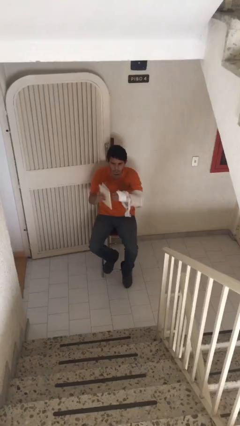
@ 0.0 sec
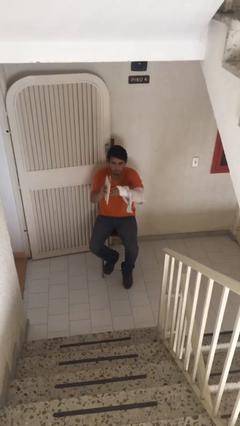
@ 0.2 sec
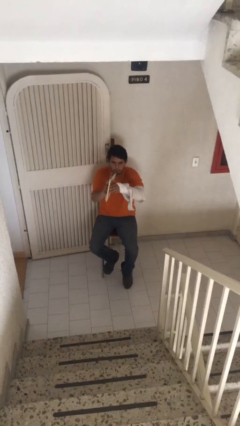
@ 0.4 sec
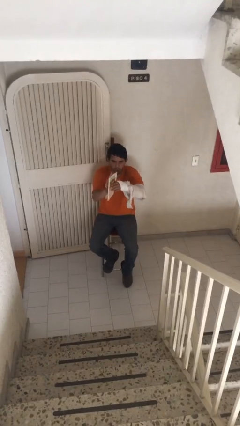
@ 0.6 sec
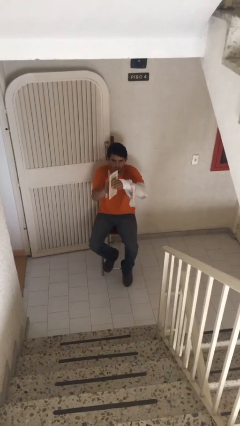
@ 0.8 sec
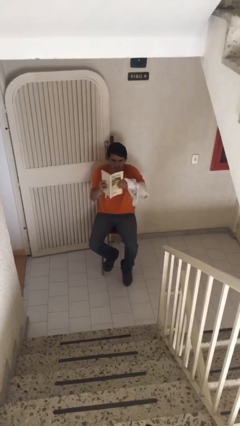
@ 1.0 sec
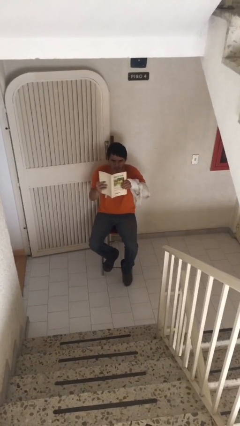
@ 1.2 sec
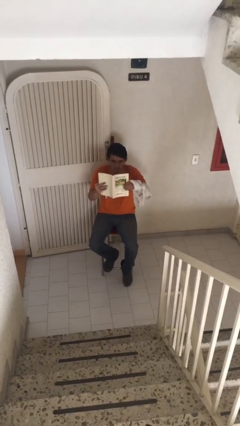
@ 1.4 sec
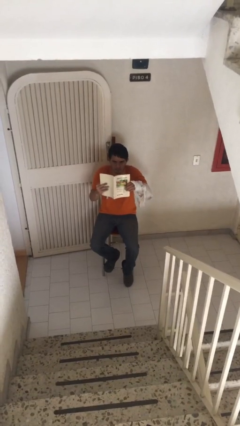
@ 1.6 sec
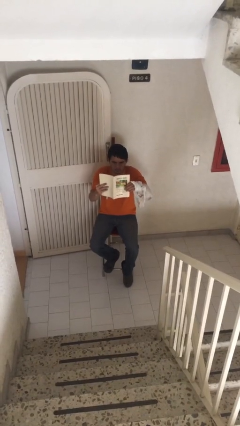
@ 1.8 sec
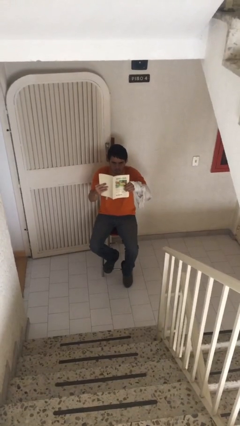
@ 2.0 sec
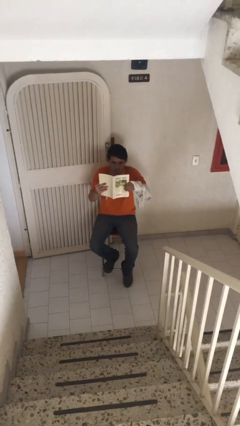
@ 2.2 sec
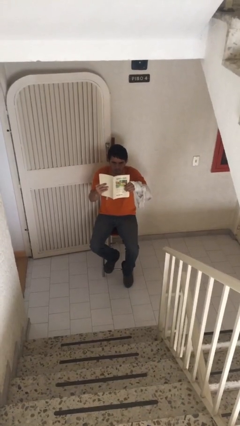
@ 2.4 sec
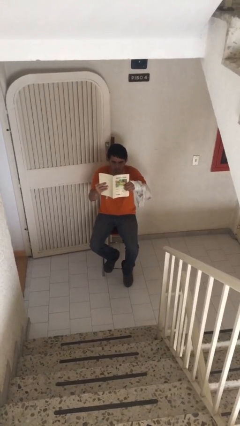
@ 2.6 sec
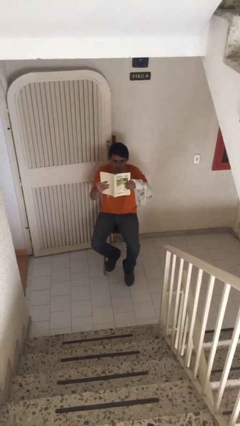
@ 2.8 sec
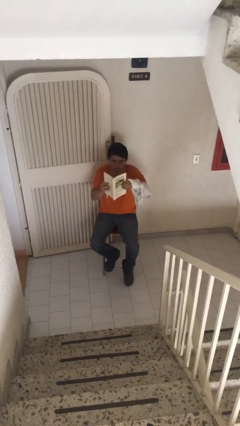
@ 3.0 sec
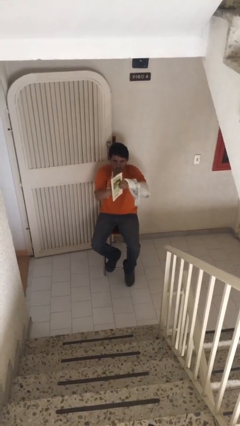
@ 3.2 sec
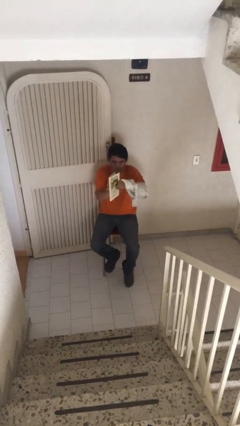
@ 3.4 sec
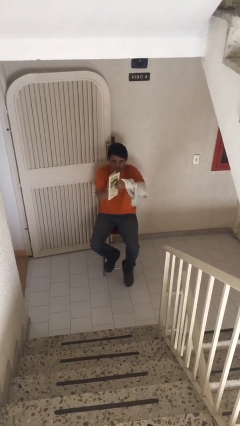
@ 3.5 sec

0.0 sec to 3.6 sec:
person reads document

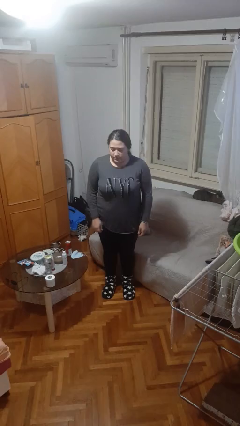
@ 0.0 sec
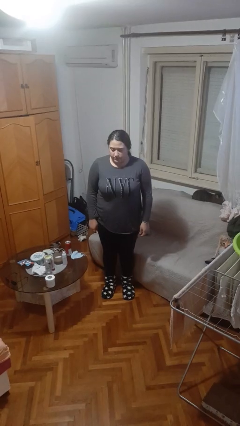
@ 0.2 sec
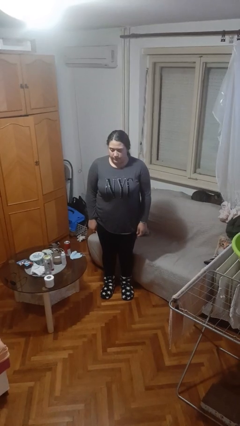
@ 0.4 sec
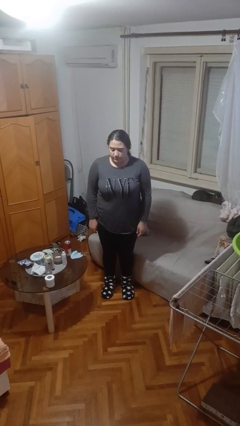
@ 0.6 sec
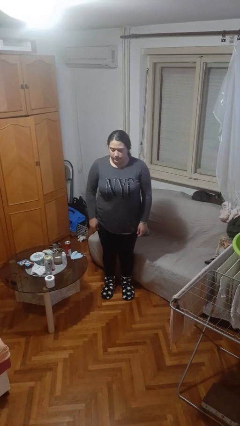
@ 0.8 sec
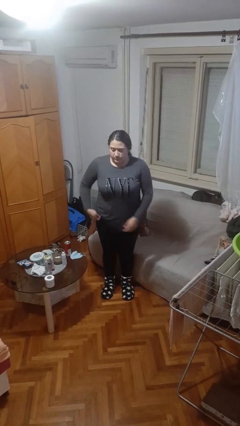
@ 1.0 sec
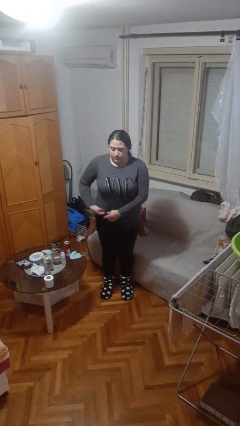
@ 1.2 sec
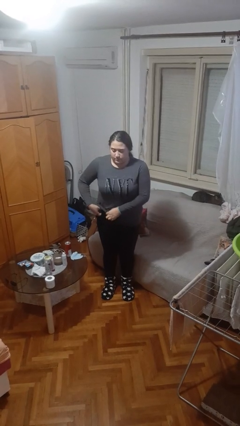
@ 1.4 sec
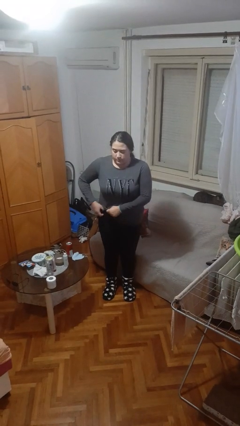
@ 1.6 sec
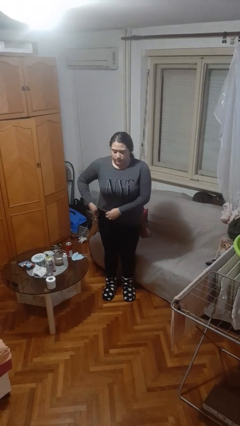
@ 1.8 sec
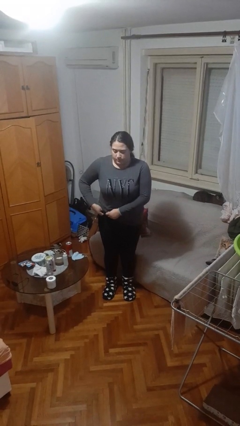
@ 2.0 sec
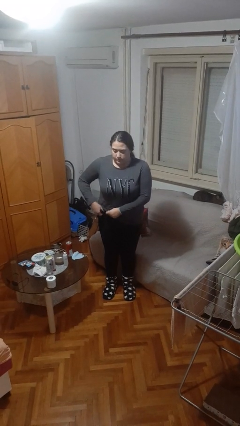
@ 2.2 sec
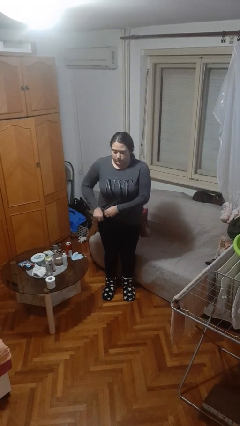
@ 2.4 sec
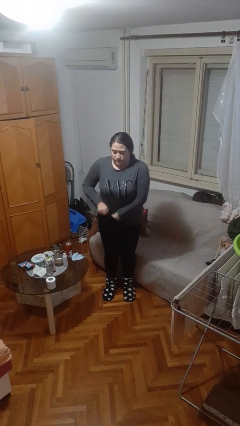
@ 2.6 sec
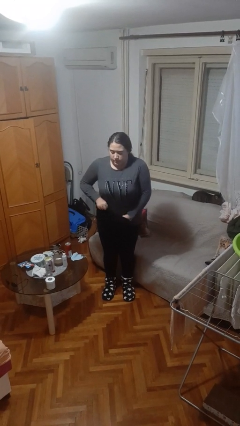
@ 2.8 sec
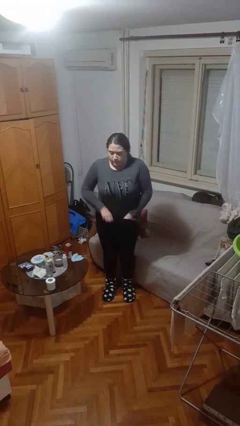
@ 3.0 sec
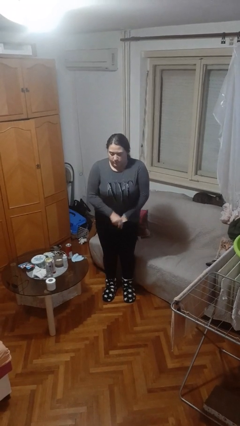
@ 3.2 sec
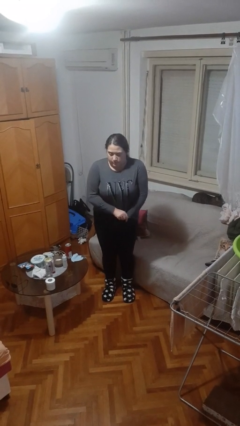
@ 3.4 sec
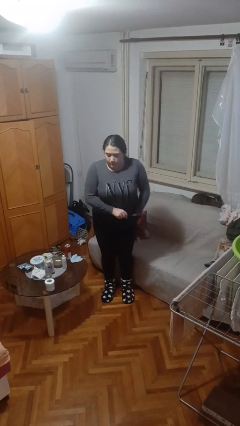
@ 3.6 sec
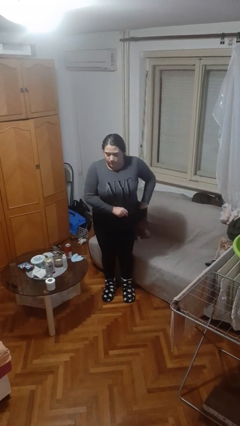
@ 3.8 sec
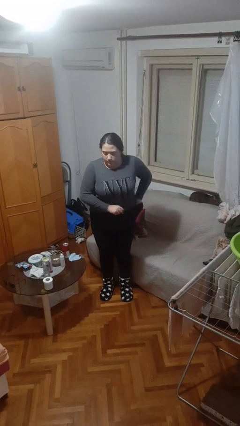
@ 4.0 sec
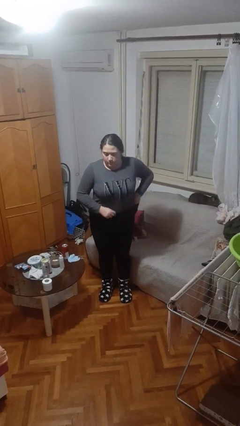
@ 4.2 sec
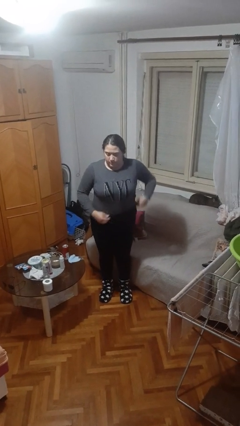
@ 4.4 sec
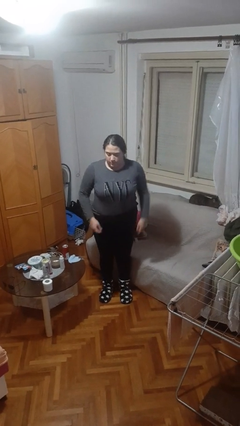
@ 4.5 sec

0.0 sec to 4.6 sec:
person tucks in shirt

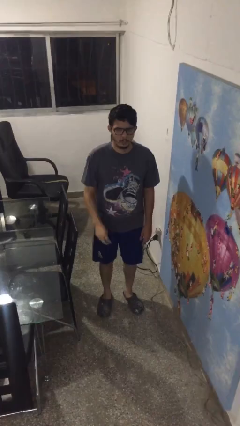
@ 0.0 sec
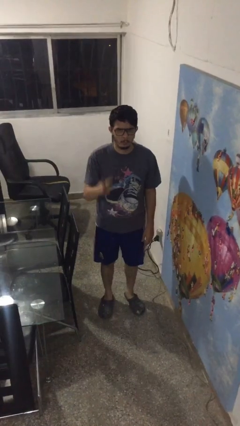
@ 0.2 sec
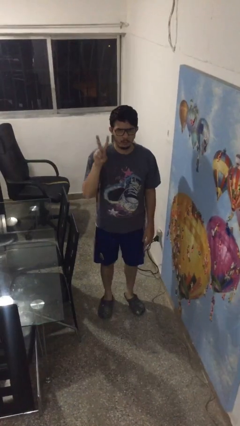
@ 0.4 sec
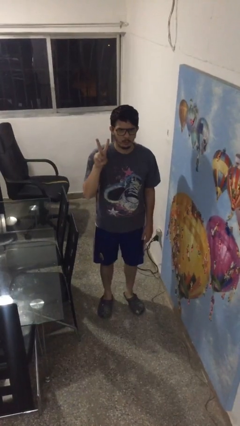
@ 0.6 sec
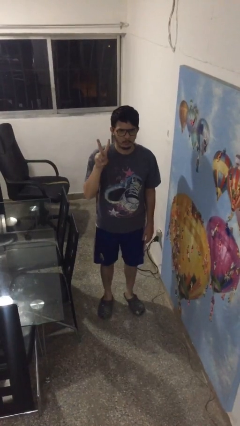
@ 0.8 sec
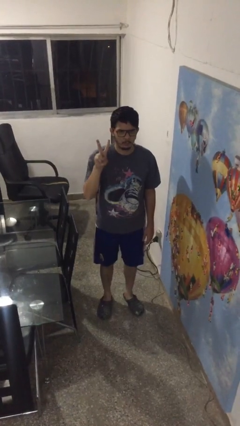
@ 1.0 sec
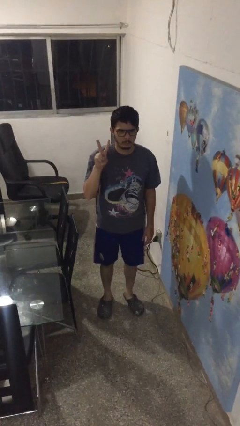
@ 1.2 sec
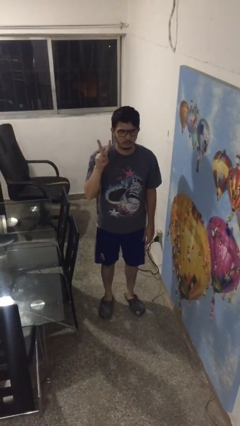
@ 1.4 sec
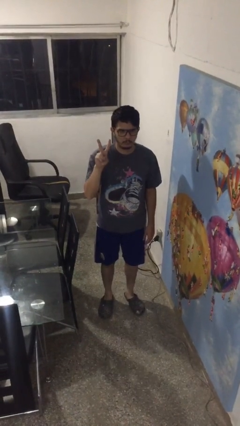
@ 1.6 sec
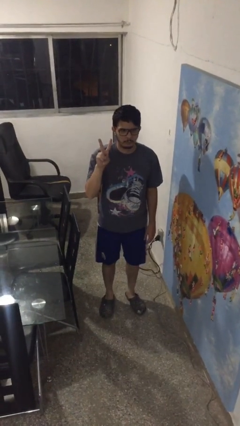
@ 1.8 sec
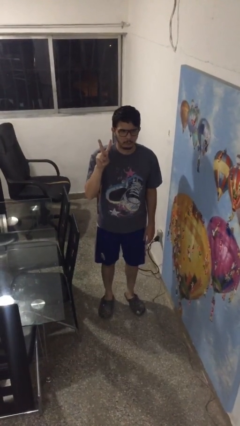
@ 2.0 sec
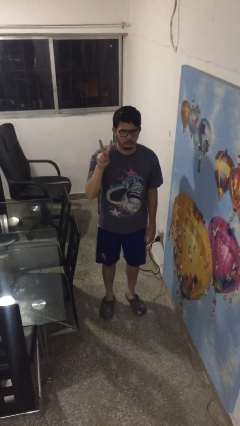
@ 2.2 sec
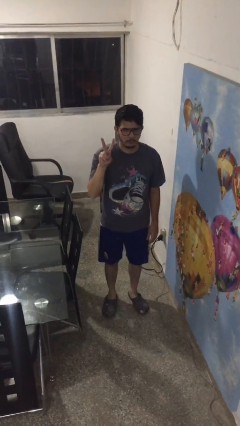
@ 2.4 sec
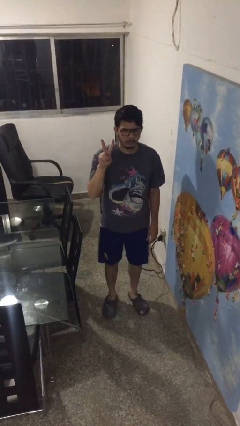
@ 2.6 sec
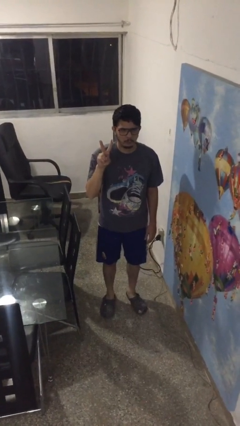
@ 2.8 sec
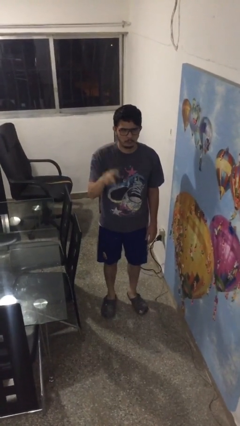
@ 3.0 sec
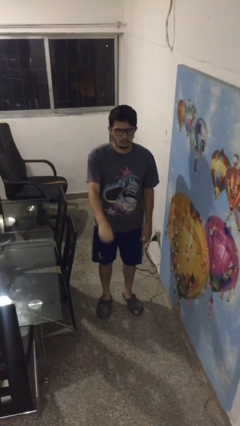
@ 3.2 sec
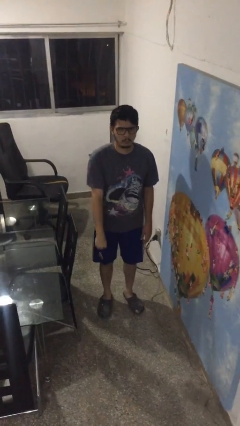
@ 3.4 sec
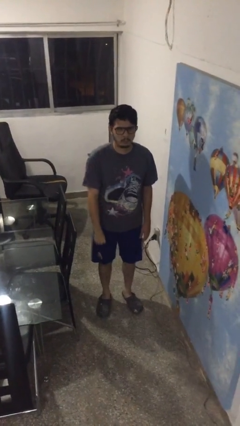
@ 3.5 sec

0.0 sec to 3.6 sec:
person gestures peace

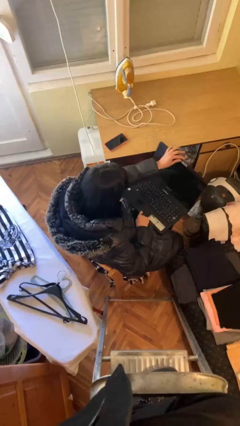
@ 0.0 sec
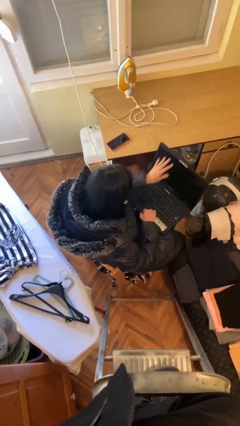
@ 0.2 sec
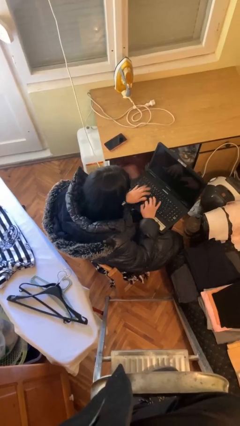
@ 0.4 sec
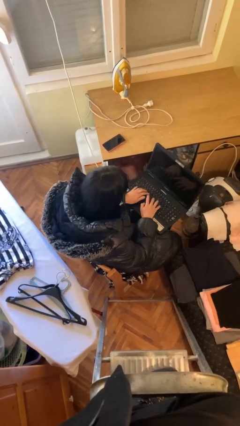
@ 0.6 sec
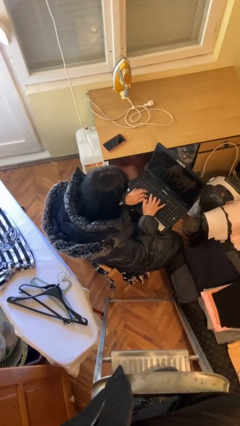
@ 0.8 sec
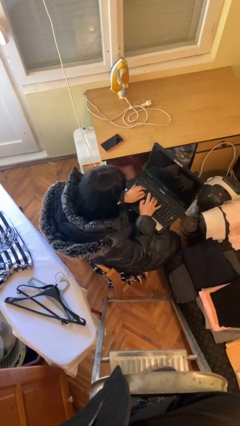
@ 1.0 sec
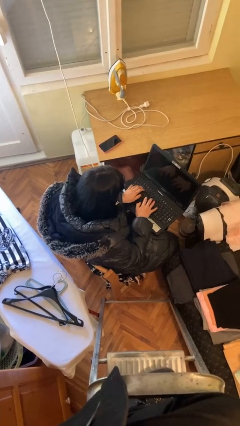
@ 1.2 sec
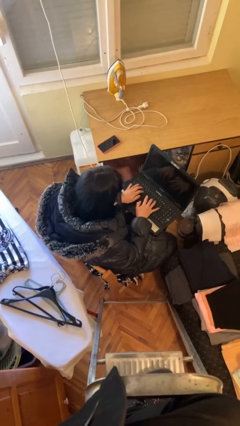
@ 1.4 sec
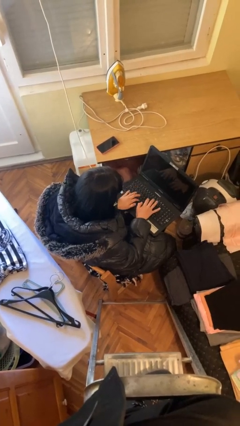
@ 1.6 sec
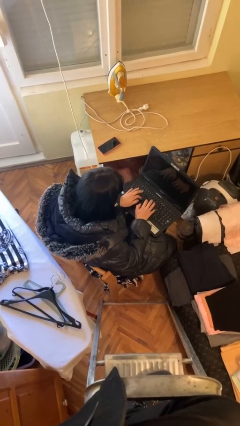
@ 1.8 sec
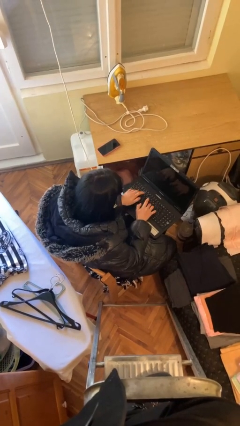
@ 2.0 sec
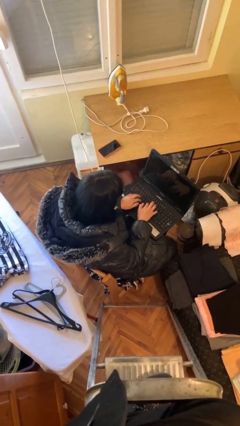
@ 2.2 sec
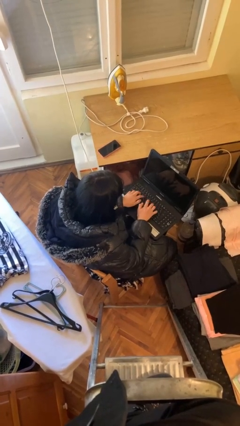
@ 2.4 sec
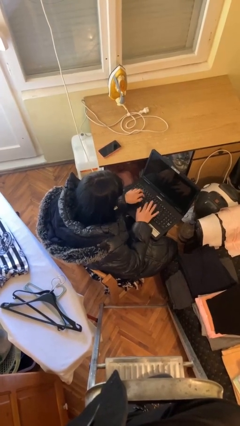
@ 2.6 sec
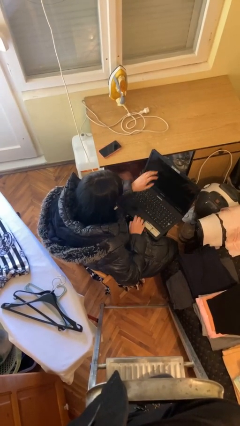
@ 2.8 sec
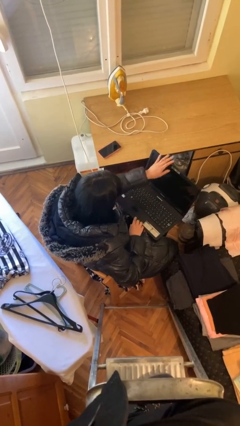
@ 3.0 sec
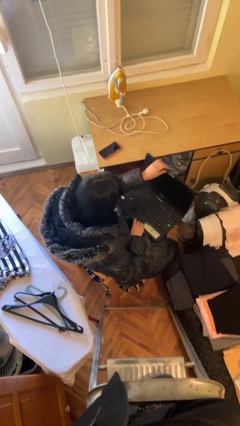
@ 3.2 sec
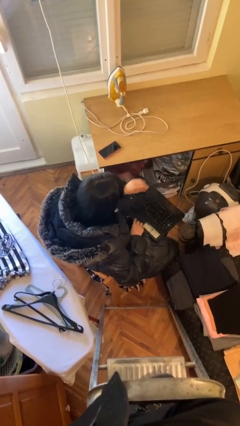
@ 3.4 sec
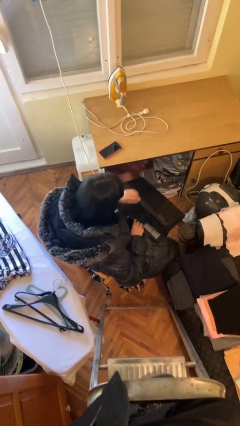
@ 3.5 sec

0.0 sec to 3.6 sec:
person interacts with laptop

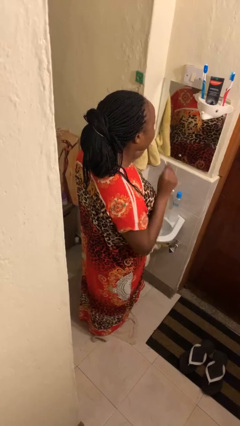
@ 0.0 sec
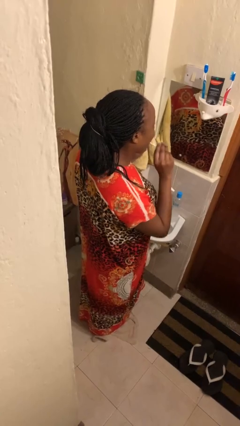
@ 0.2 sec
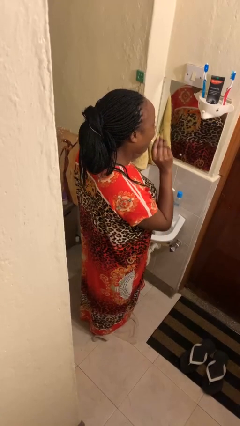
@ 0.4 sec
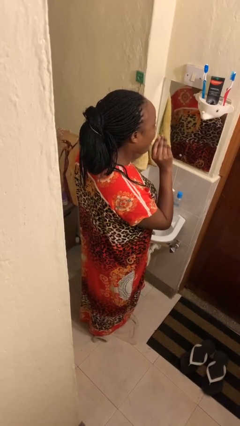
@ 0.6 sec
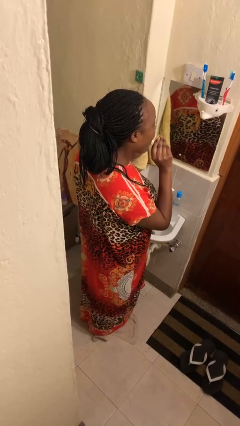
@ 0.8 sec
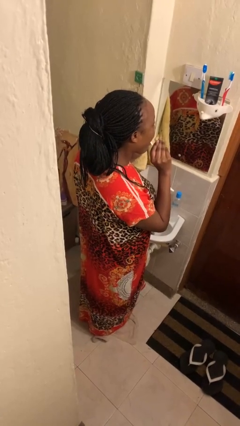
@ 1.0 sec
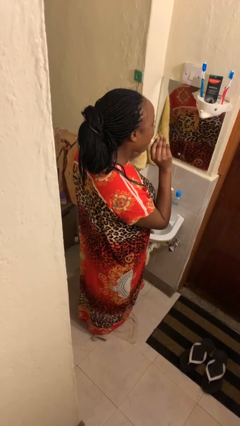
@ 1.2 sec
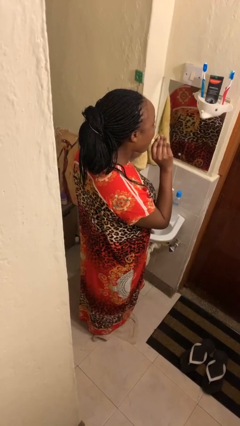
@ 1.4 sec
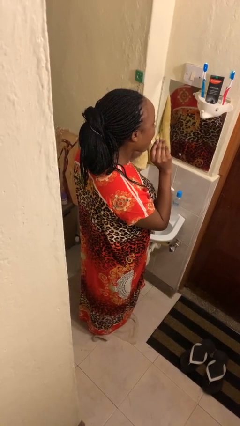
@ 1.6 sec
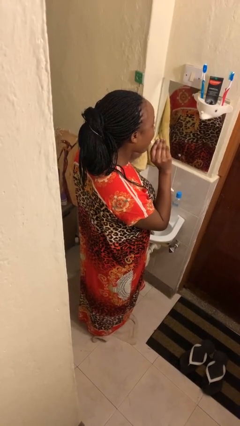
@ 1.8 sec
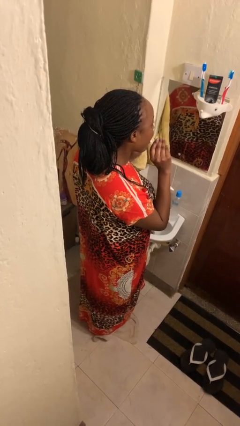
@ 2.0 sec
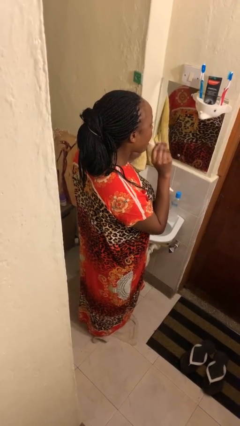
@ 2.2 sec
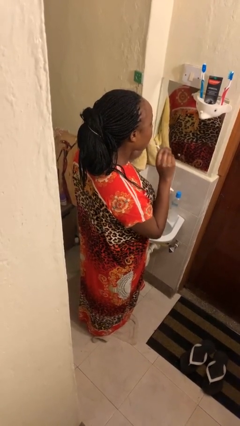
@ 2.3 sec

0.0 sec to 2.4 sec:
person flosses
